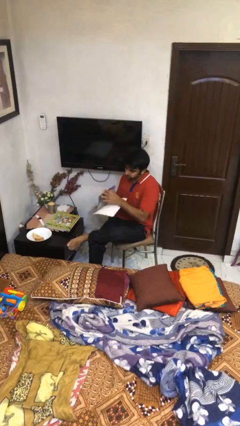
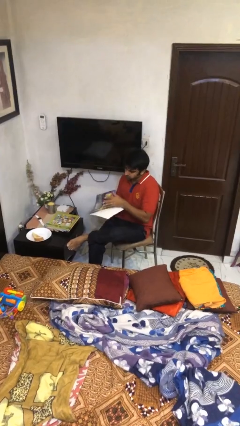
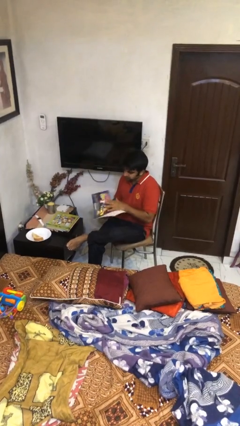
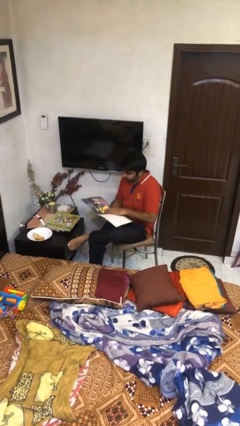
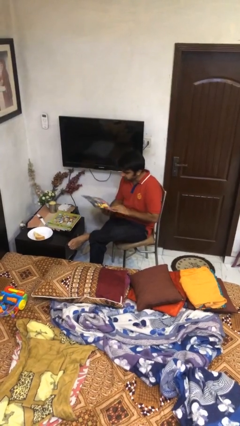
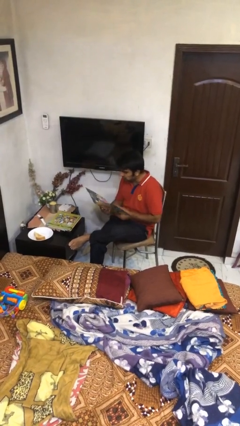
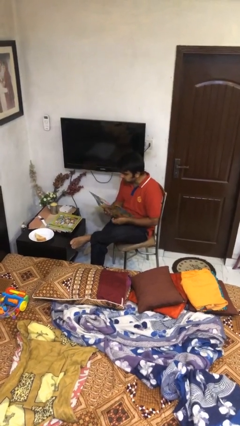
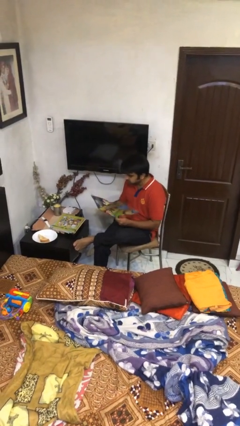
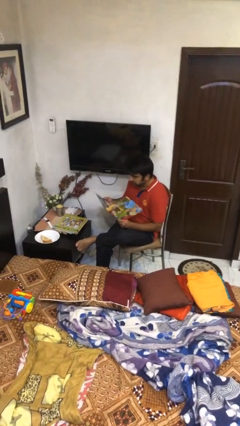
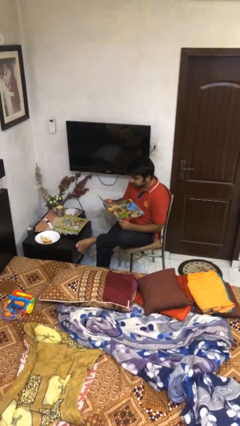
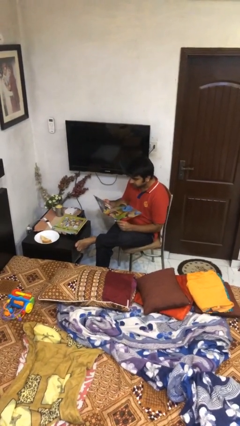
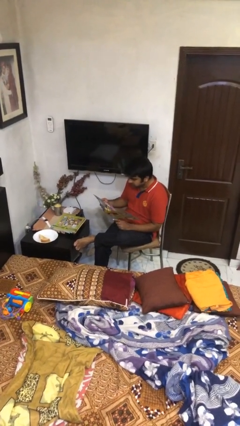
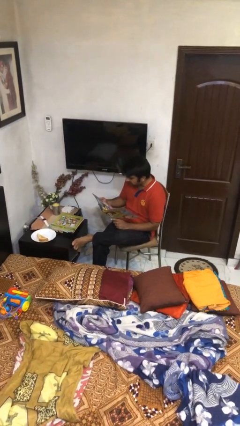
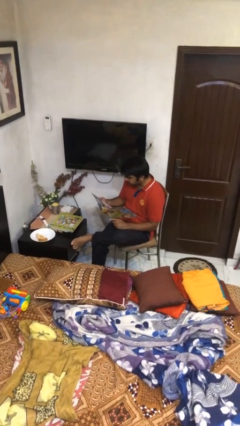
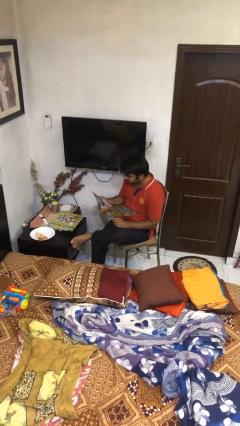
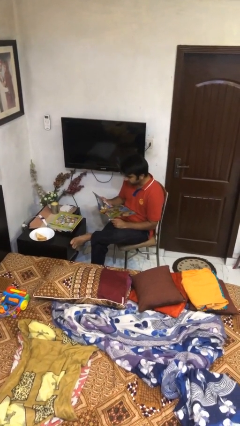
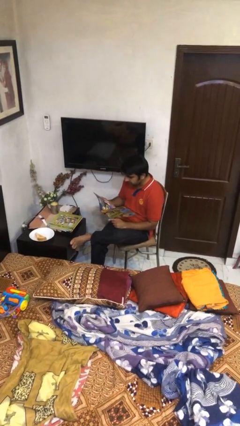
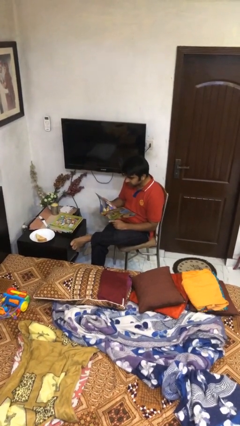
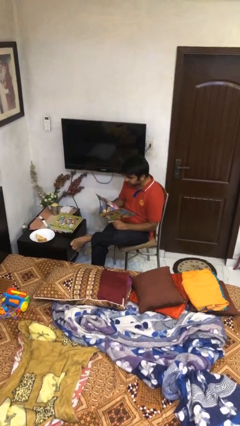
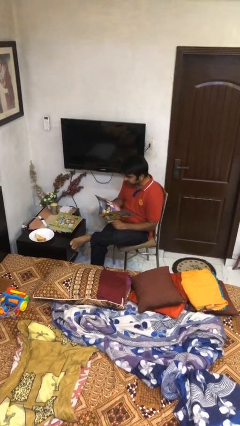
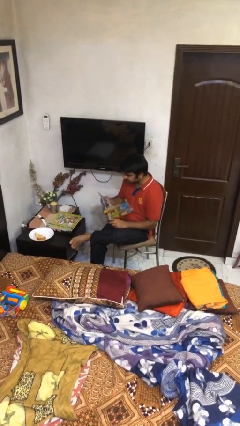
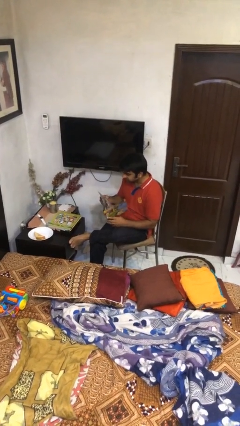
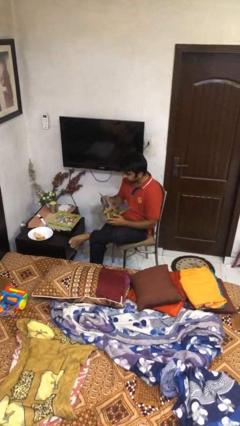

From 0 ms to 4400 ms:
person reads document

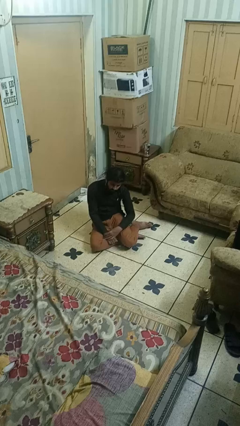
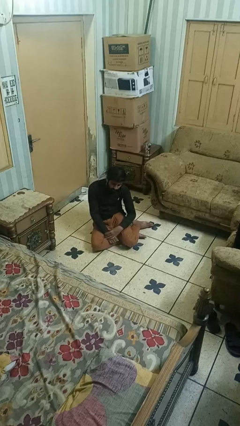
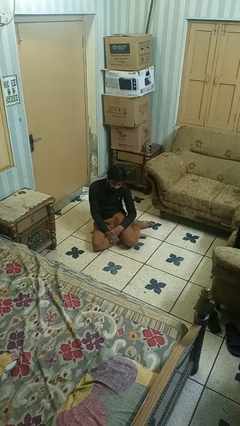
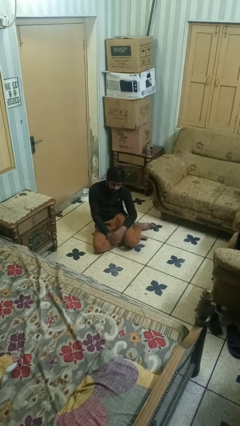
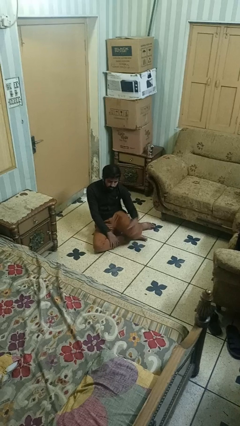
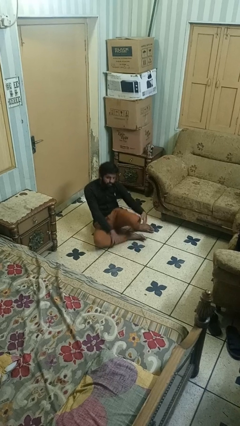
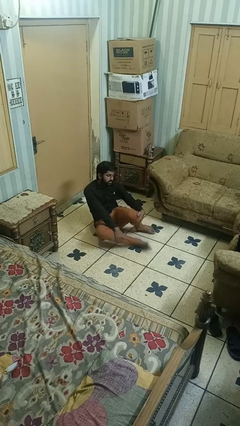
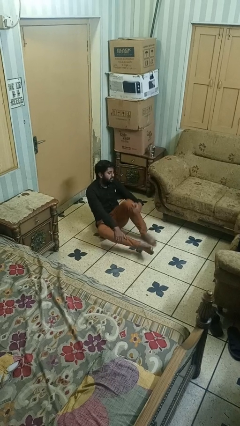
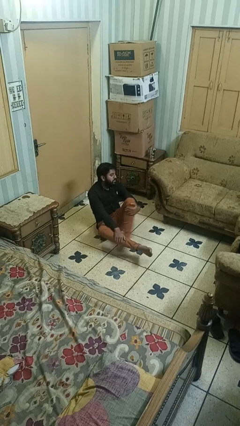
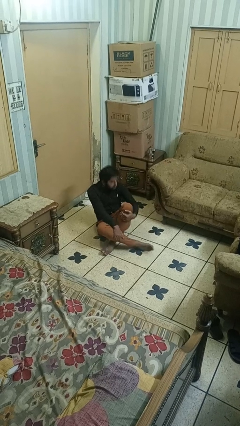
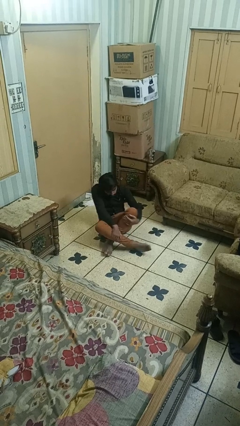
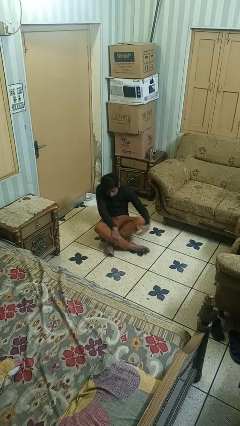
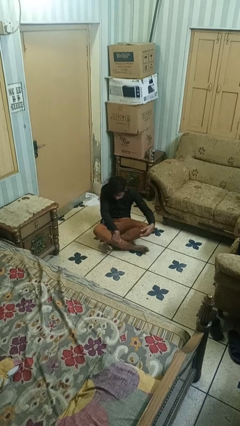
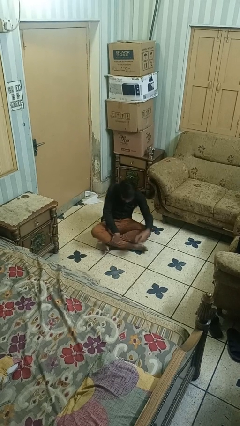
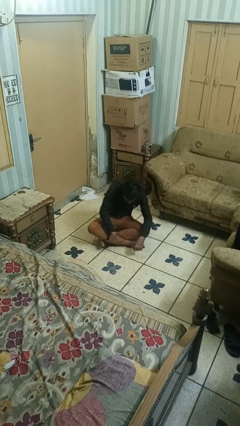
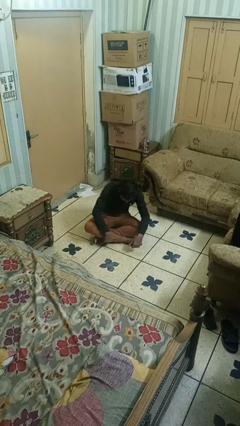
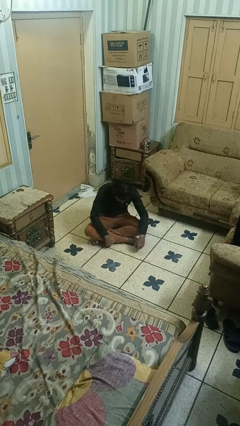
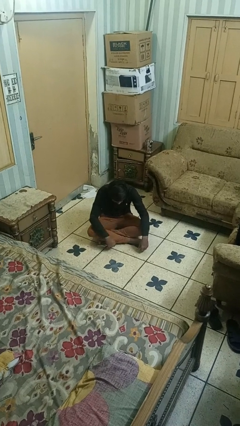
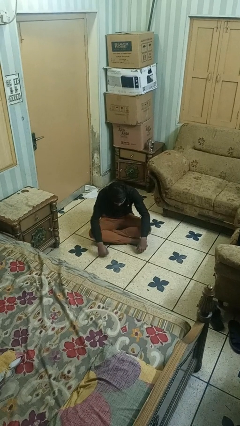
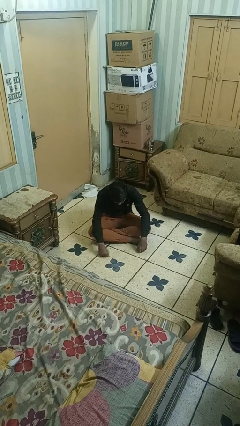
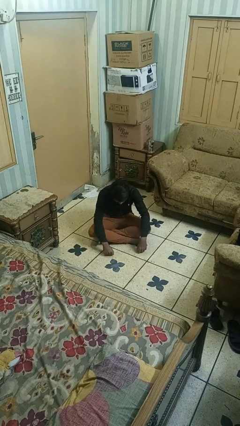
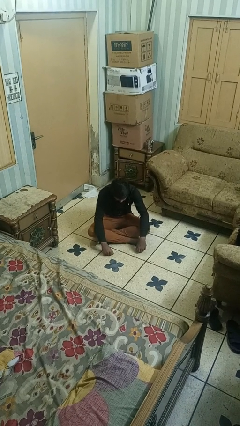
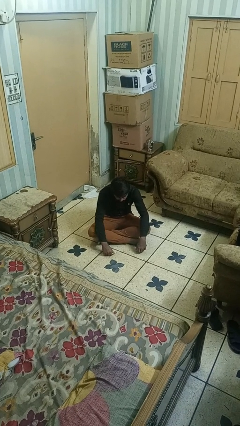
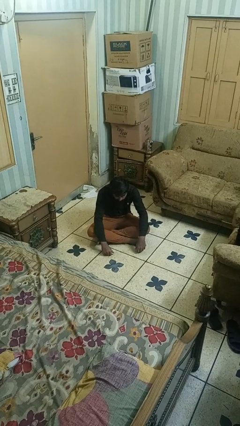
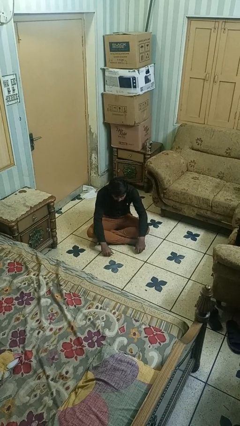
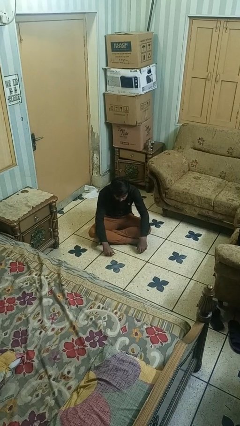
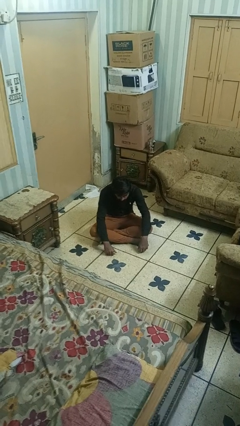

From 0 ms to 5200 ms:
person crosses legs

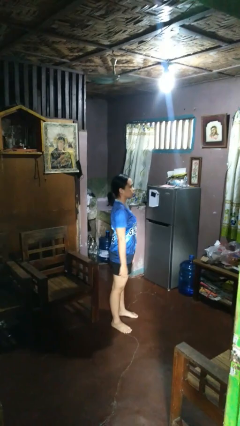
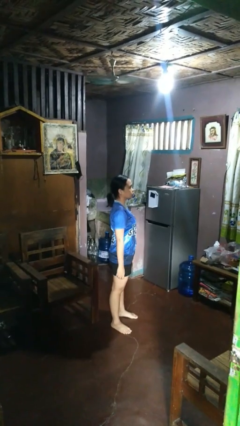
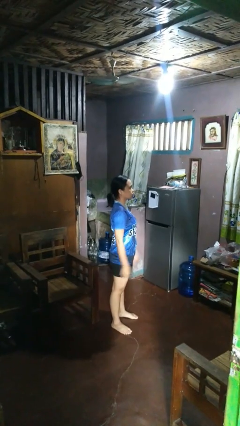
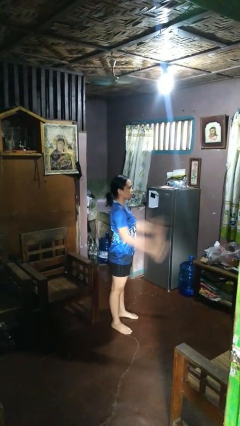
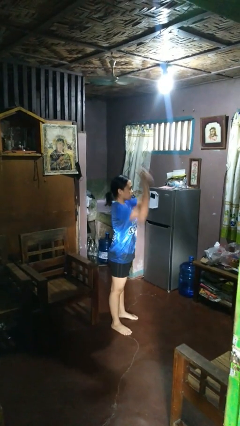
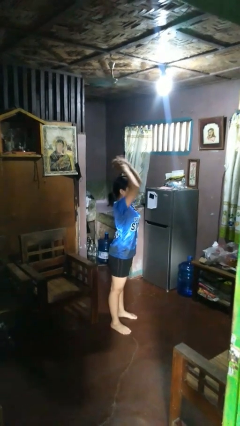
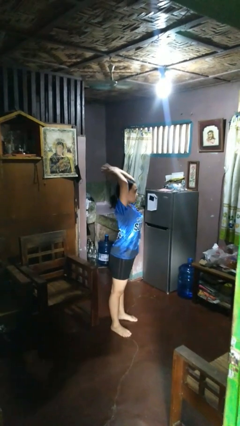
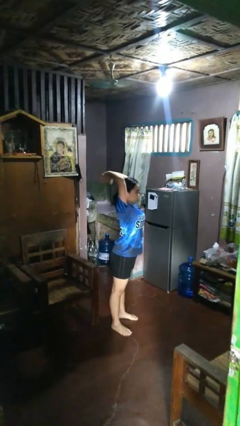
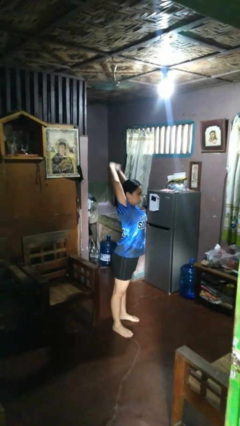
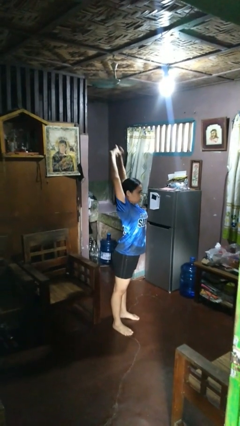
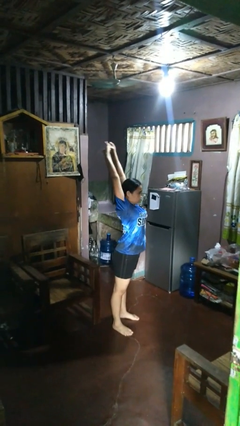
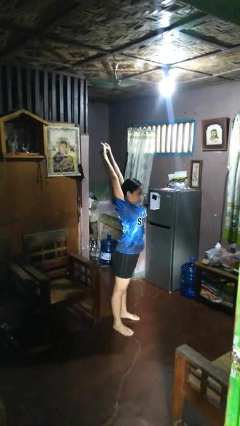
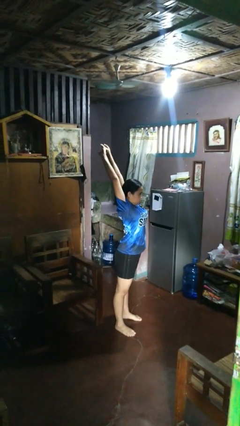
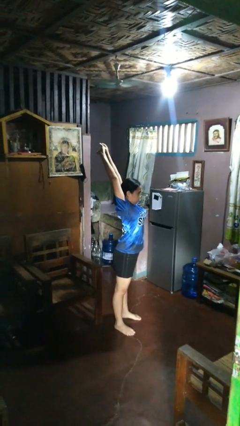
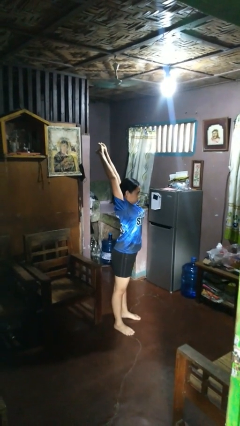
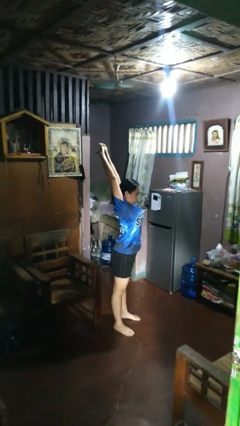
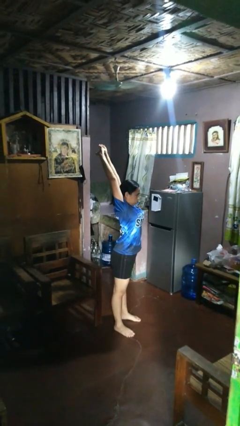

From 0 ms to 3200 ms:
person stretches arms over head

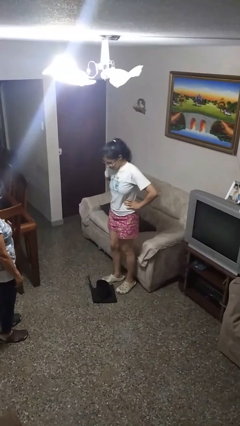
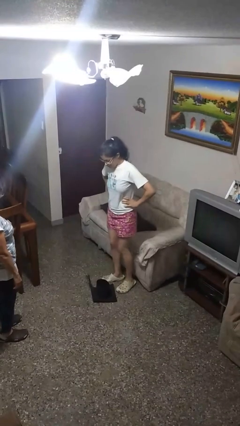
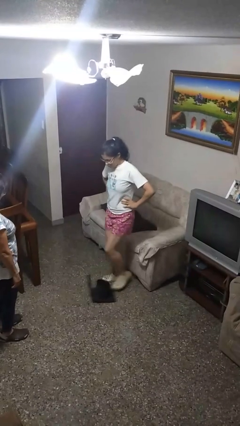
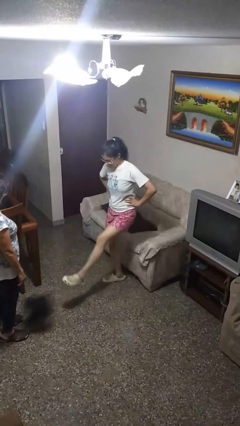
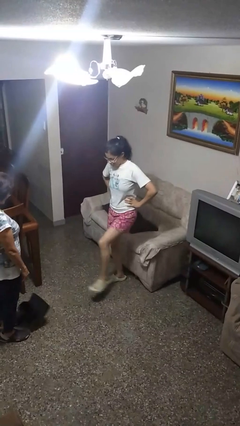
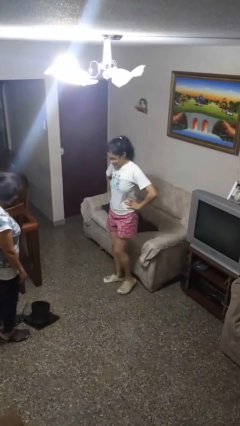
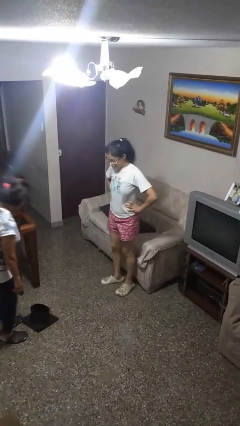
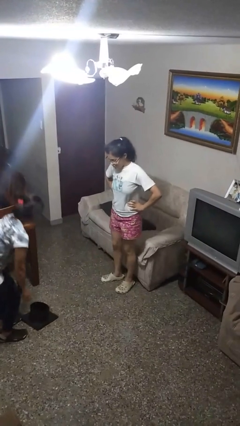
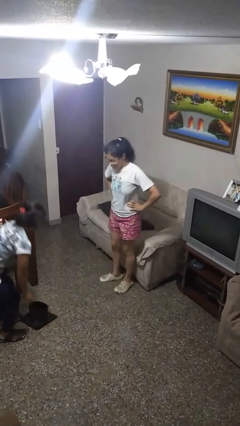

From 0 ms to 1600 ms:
person kicks object to person

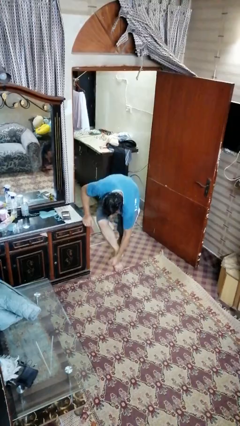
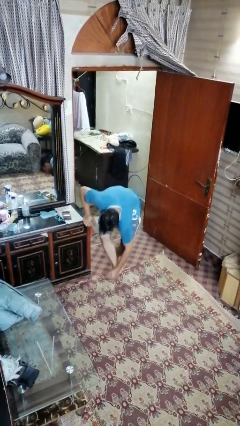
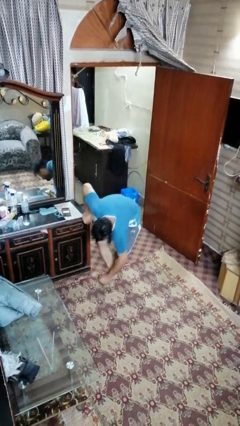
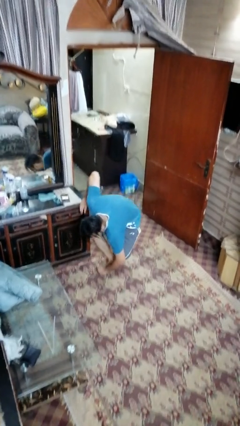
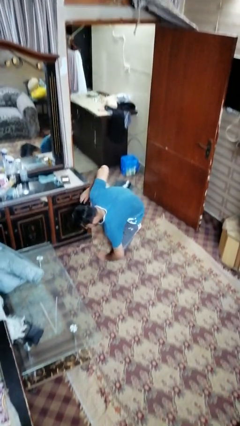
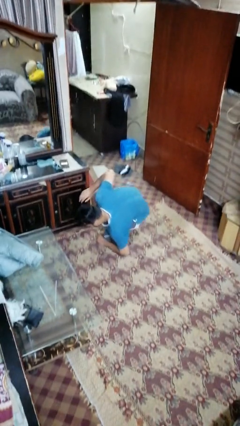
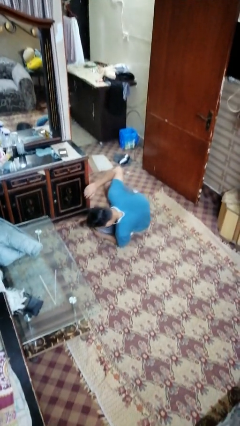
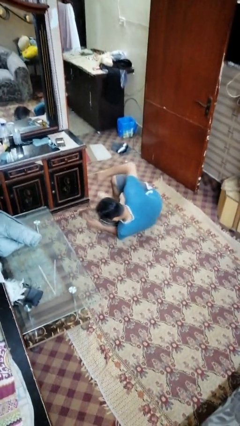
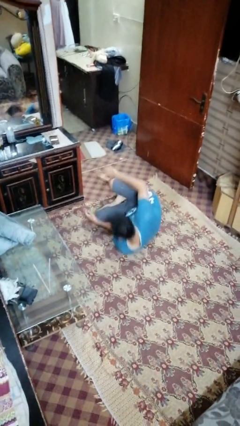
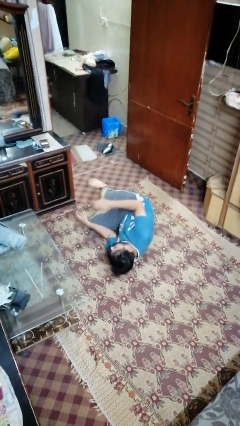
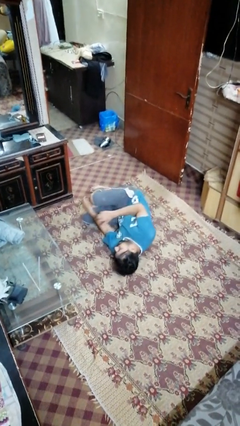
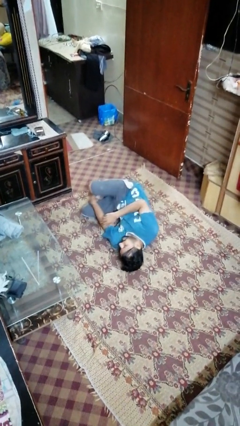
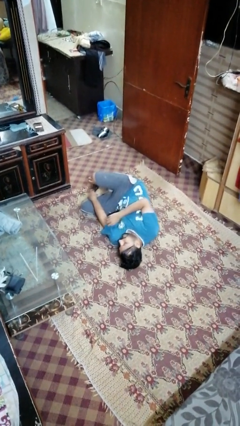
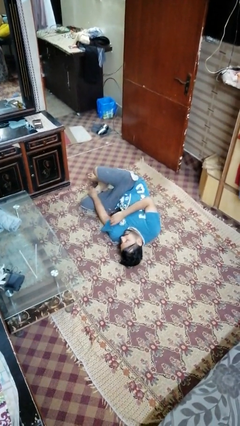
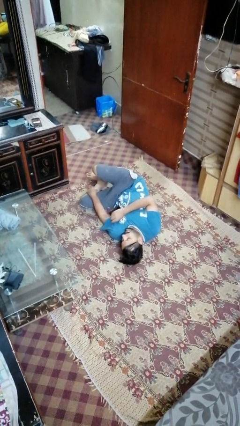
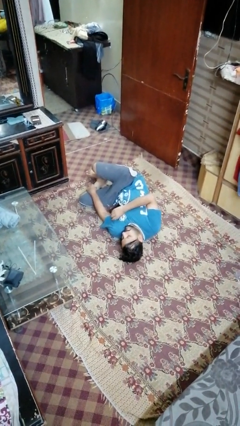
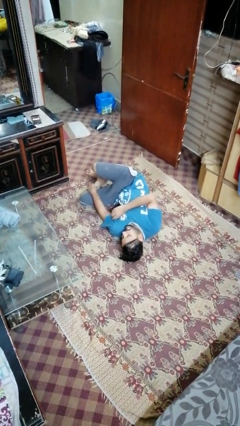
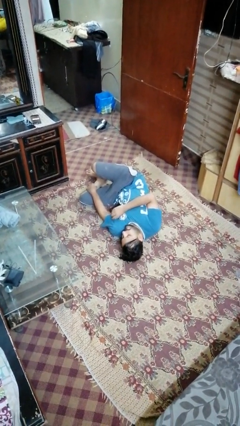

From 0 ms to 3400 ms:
person lies down on floor
